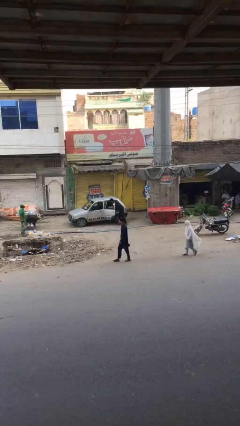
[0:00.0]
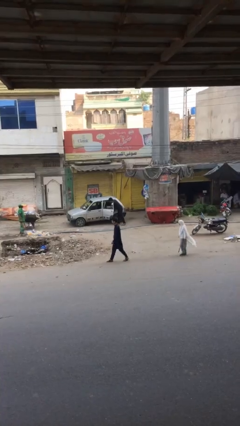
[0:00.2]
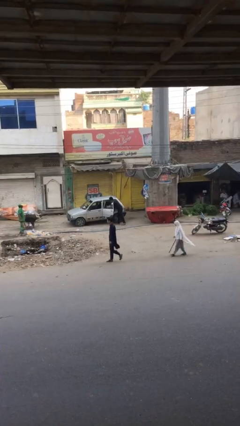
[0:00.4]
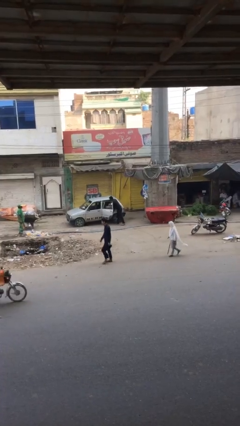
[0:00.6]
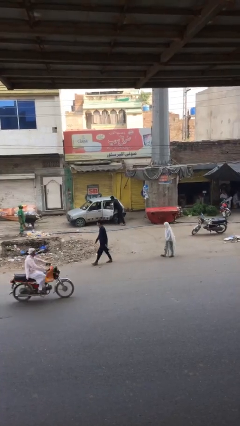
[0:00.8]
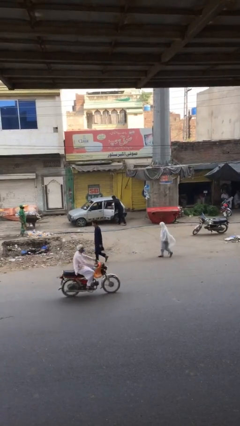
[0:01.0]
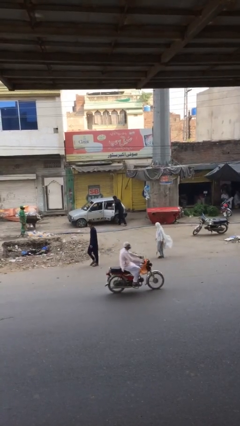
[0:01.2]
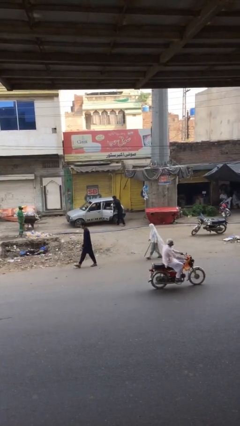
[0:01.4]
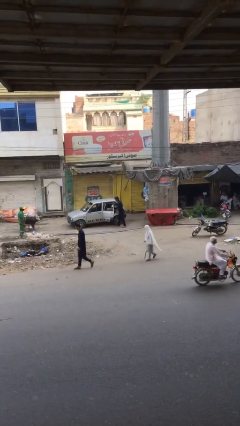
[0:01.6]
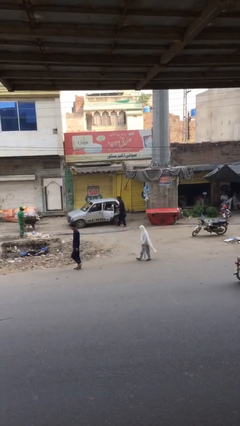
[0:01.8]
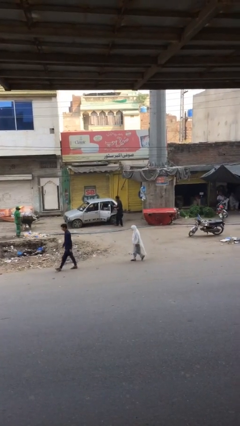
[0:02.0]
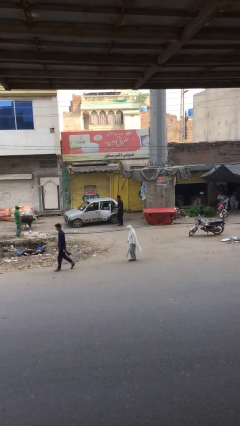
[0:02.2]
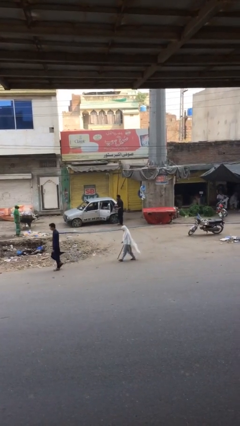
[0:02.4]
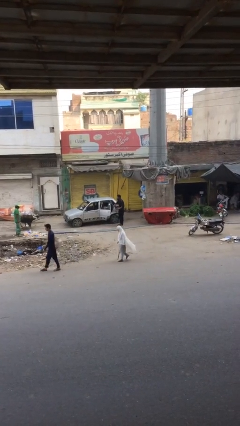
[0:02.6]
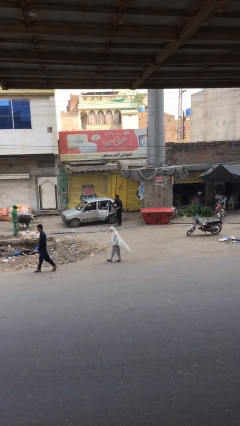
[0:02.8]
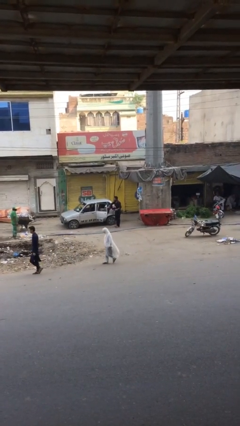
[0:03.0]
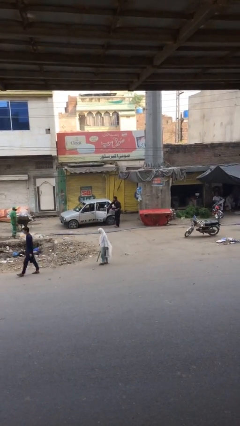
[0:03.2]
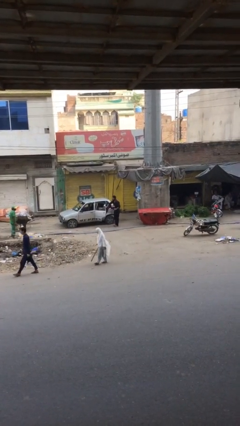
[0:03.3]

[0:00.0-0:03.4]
person unloads car

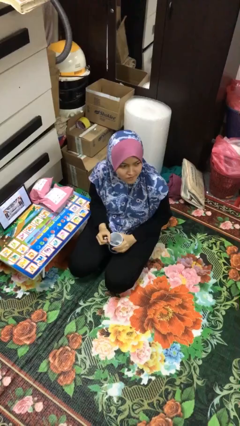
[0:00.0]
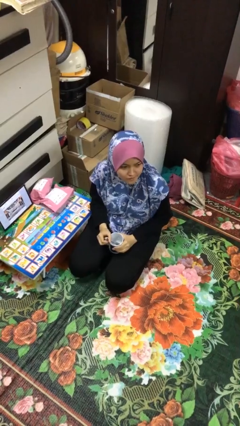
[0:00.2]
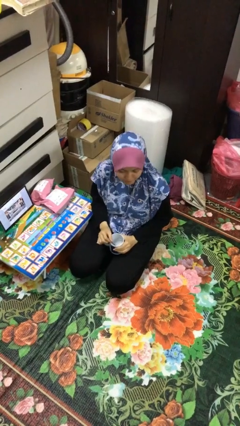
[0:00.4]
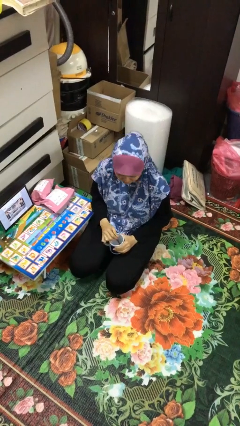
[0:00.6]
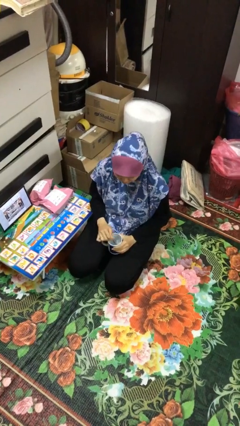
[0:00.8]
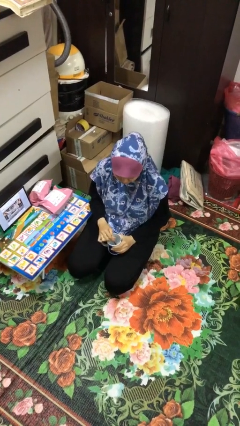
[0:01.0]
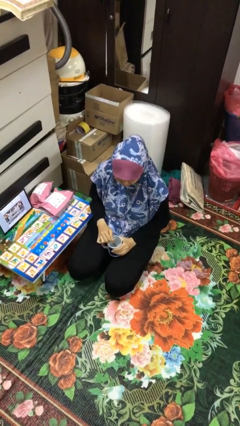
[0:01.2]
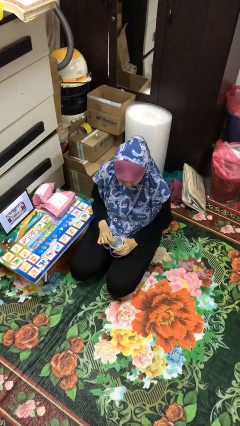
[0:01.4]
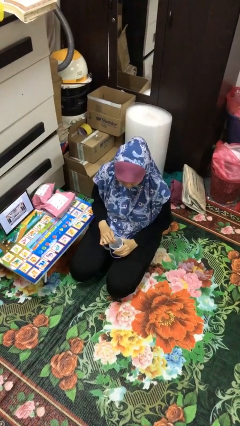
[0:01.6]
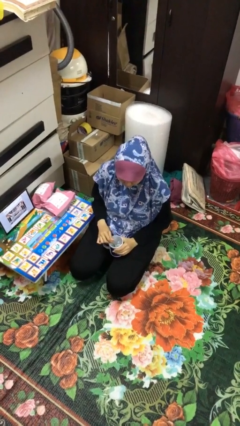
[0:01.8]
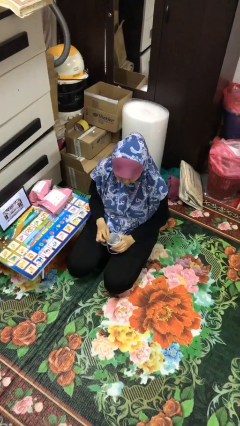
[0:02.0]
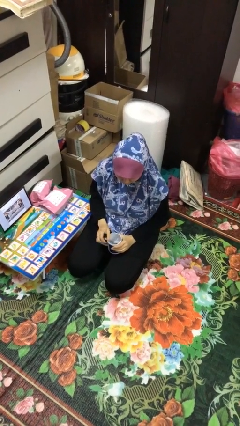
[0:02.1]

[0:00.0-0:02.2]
person stirs mug

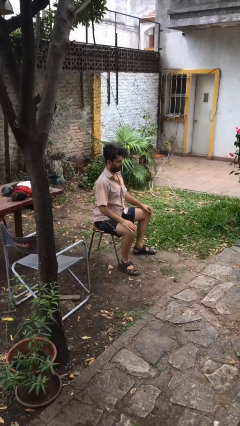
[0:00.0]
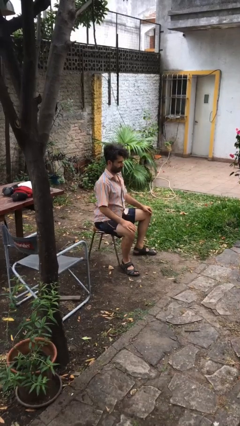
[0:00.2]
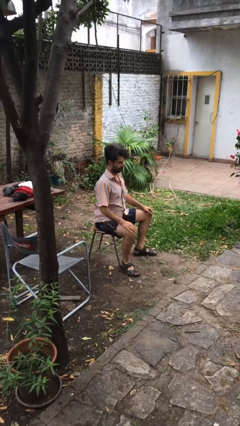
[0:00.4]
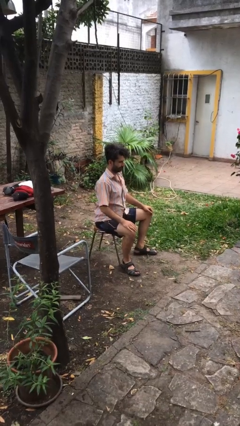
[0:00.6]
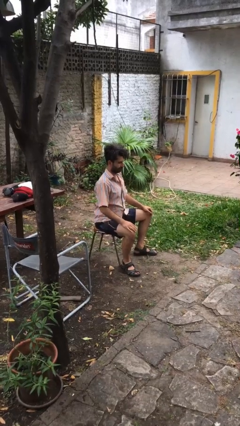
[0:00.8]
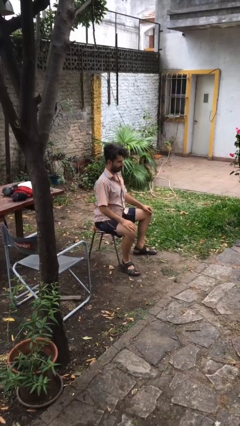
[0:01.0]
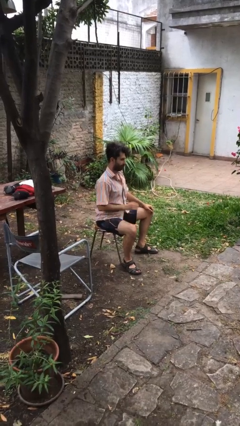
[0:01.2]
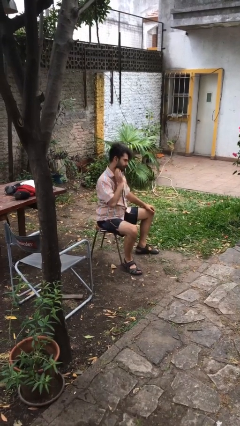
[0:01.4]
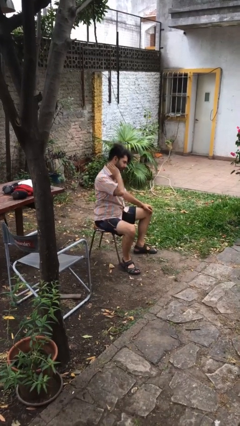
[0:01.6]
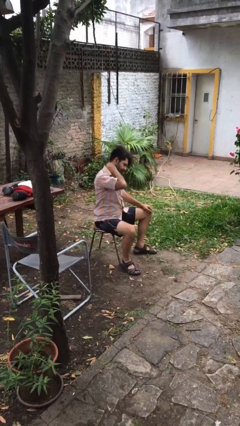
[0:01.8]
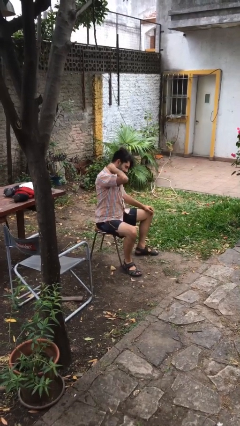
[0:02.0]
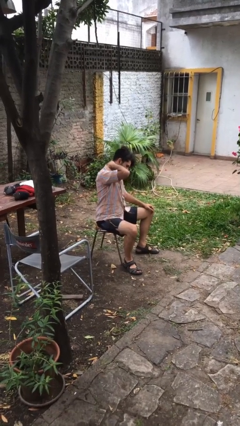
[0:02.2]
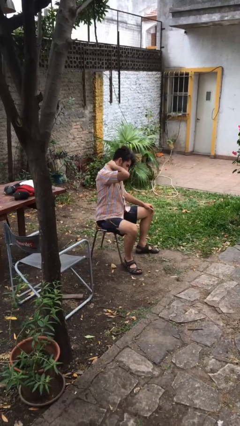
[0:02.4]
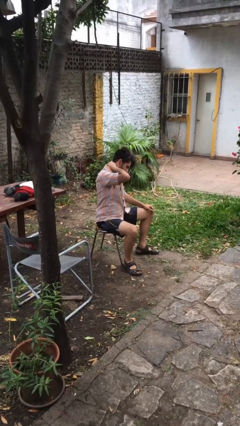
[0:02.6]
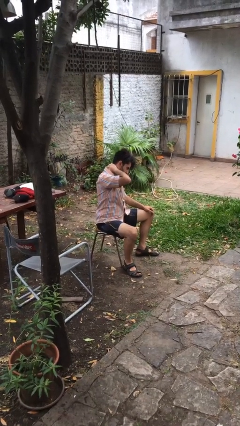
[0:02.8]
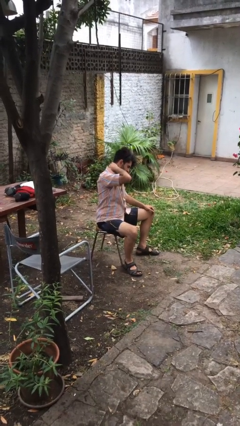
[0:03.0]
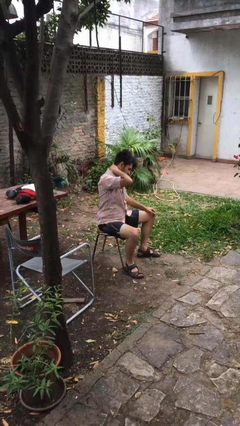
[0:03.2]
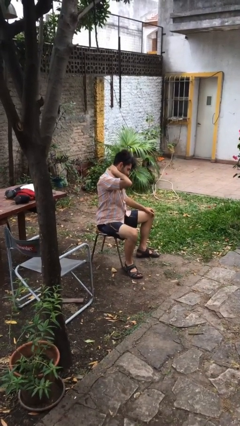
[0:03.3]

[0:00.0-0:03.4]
person rubs neck

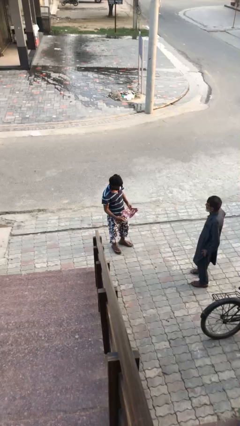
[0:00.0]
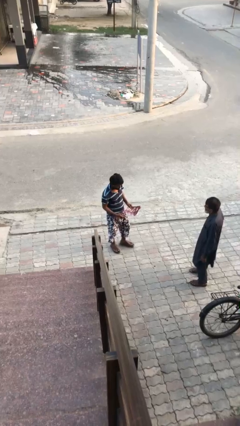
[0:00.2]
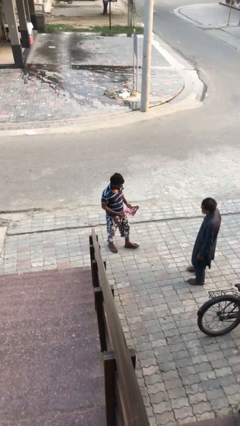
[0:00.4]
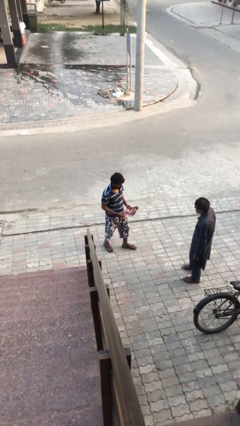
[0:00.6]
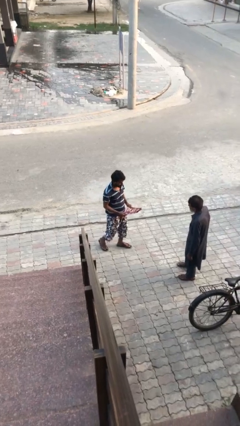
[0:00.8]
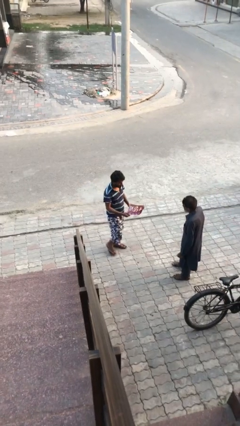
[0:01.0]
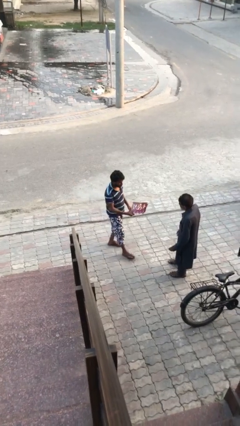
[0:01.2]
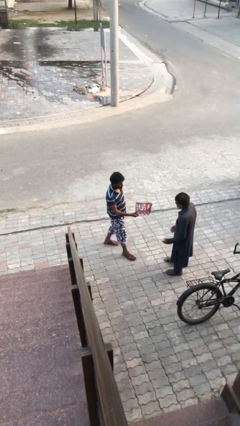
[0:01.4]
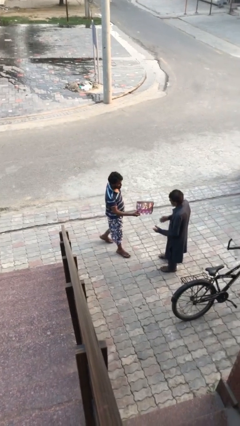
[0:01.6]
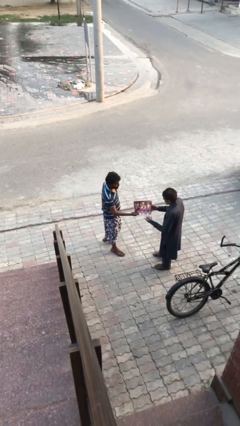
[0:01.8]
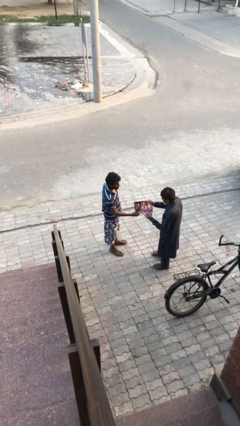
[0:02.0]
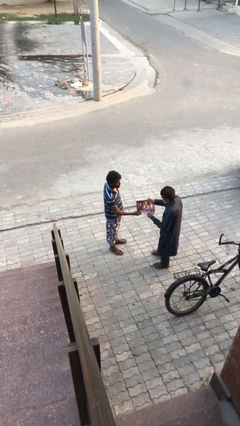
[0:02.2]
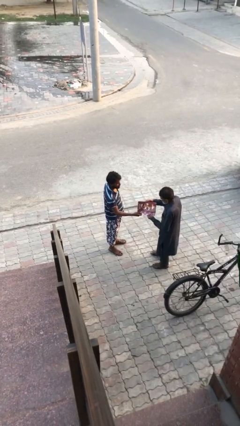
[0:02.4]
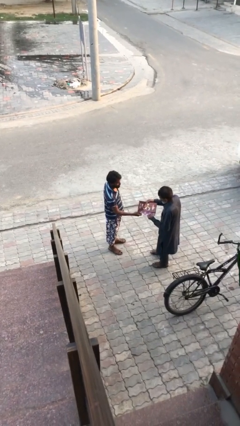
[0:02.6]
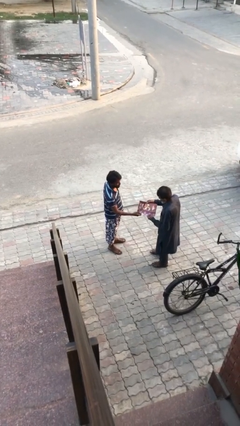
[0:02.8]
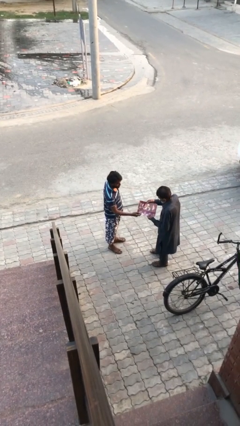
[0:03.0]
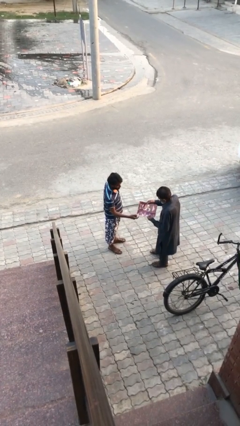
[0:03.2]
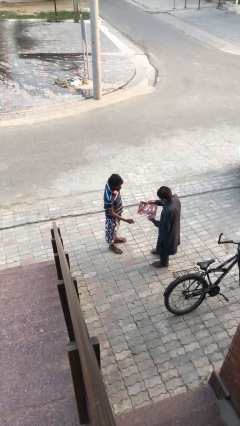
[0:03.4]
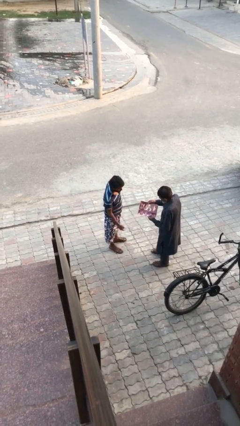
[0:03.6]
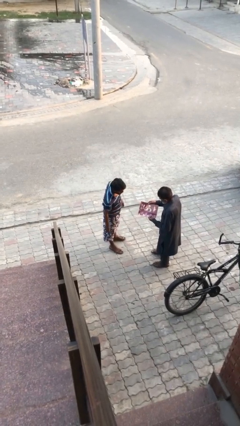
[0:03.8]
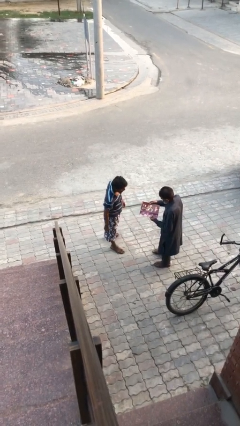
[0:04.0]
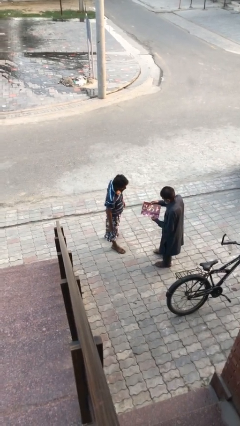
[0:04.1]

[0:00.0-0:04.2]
person transfers object to person

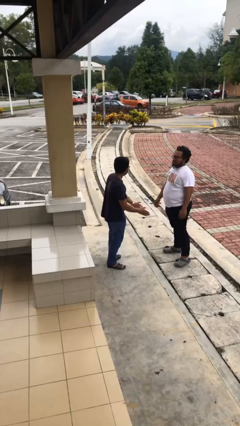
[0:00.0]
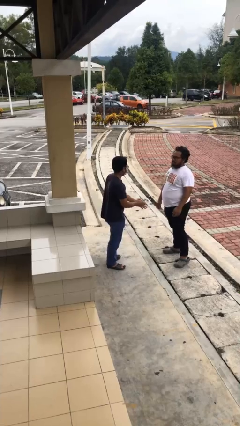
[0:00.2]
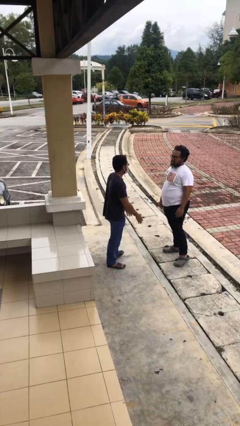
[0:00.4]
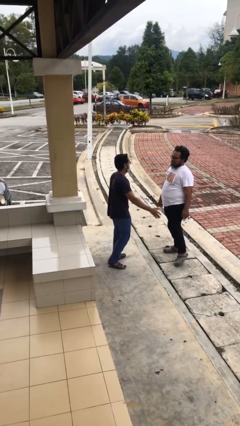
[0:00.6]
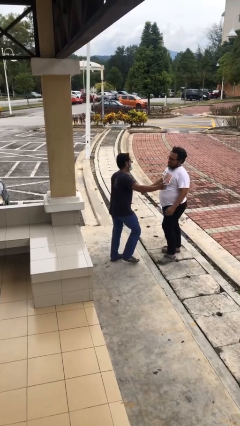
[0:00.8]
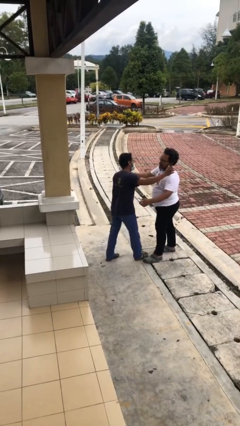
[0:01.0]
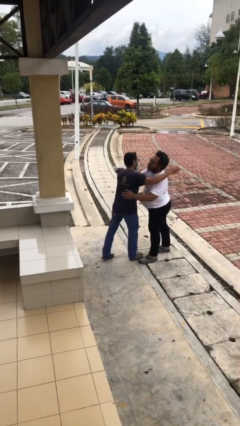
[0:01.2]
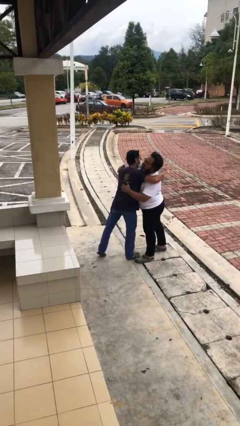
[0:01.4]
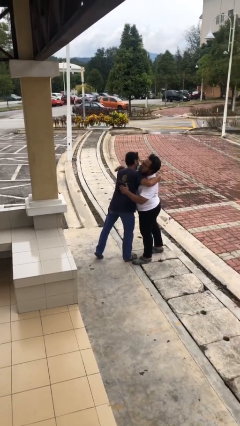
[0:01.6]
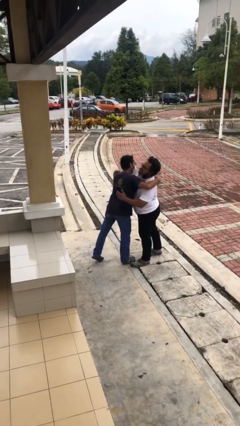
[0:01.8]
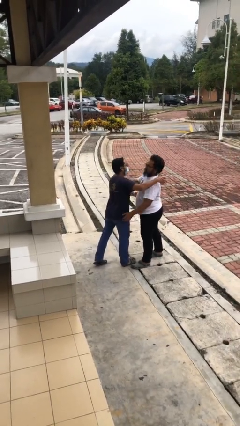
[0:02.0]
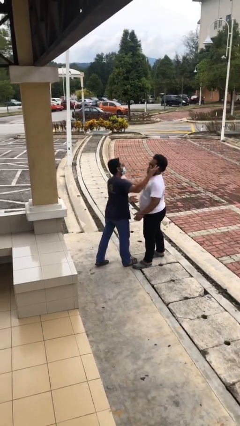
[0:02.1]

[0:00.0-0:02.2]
person embraces person

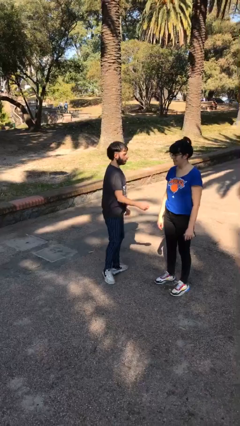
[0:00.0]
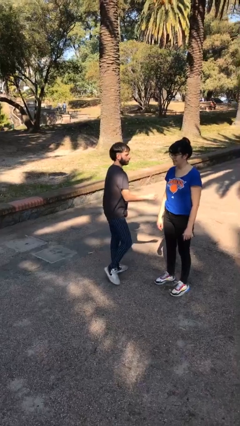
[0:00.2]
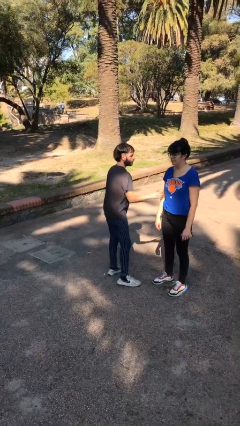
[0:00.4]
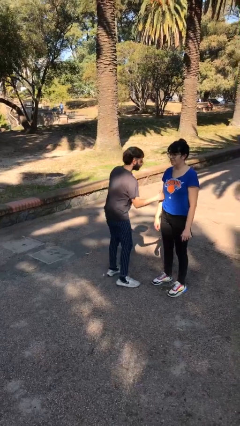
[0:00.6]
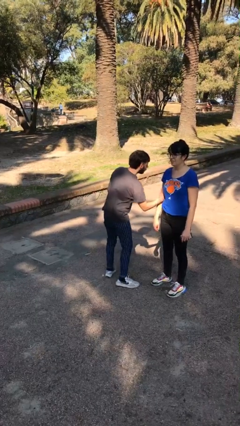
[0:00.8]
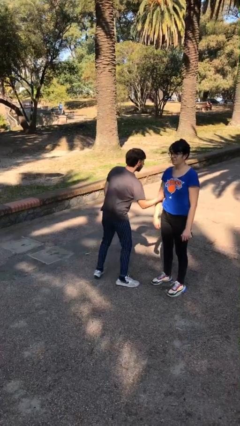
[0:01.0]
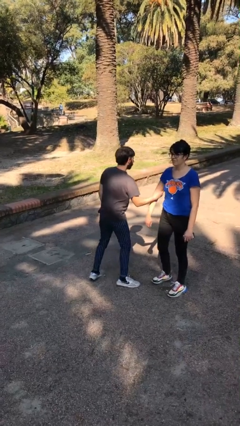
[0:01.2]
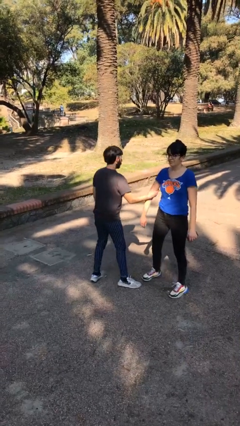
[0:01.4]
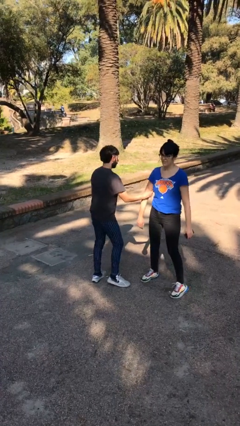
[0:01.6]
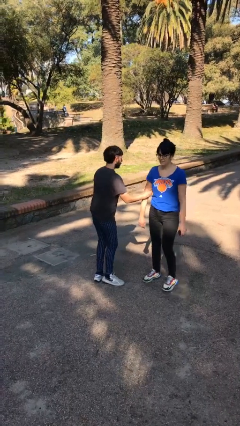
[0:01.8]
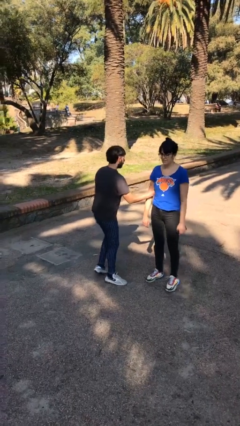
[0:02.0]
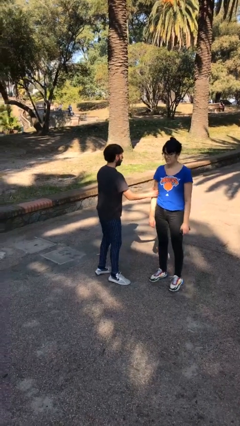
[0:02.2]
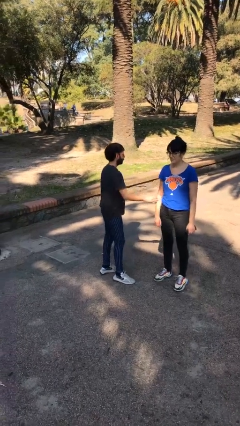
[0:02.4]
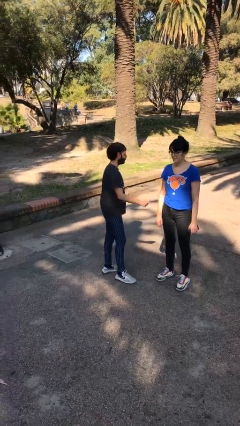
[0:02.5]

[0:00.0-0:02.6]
person grabs person by bicep
